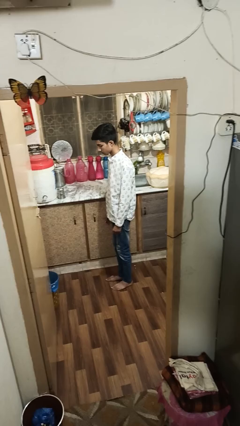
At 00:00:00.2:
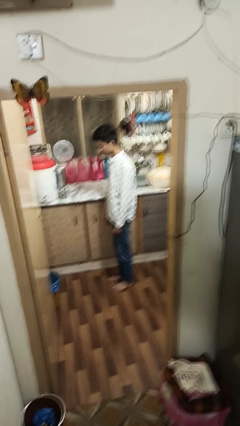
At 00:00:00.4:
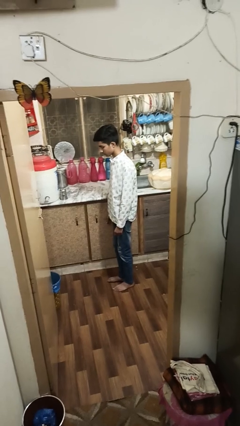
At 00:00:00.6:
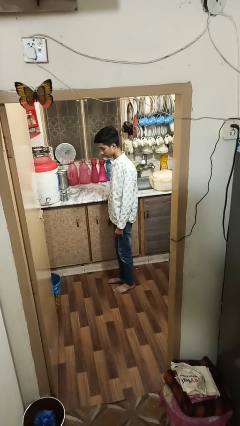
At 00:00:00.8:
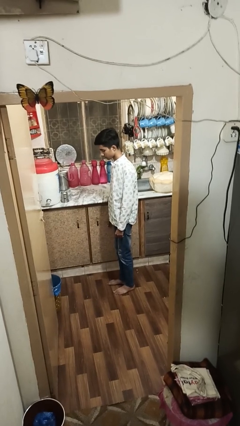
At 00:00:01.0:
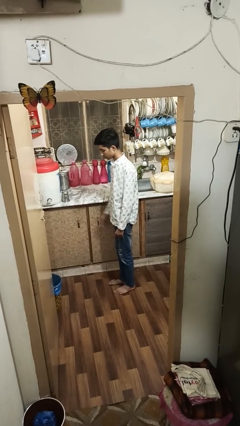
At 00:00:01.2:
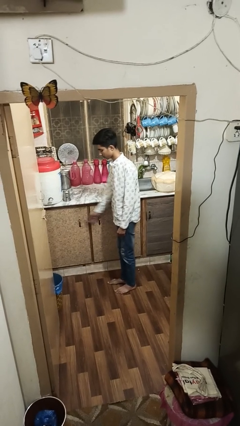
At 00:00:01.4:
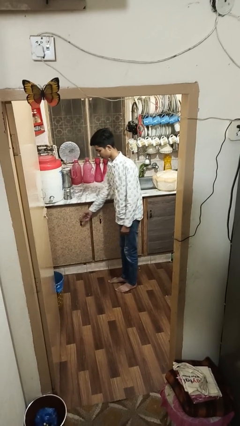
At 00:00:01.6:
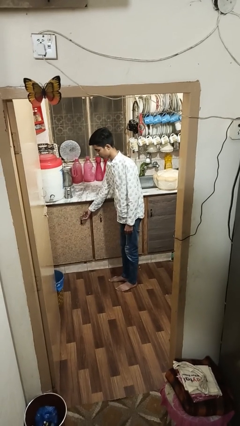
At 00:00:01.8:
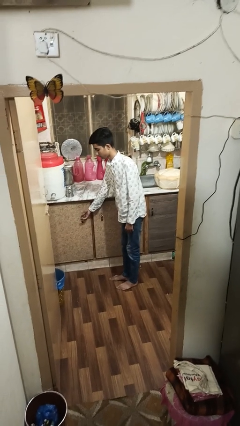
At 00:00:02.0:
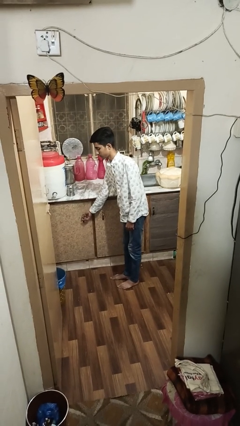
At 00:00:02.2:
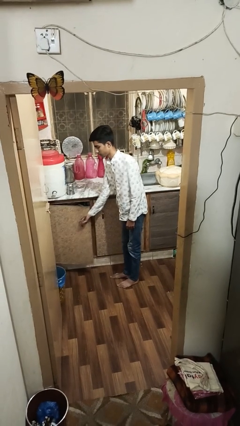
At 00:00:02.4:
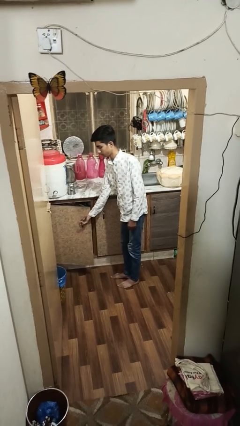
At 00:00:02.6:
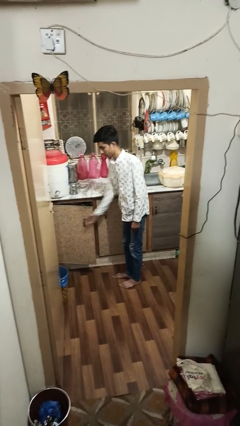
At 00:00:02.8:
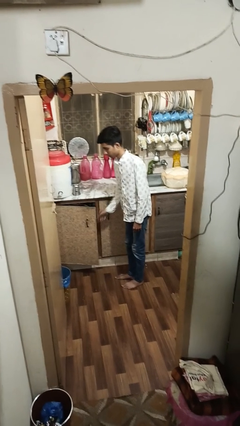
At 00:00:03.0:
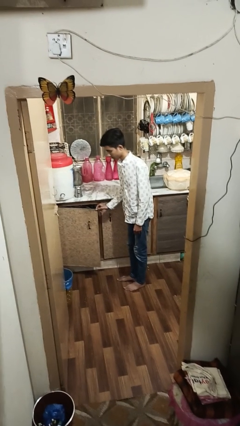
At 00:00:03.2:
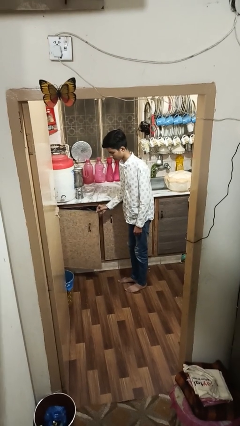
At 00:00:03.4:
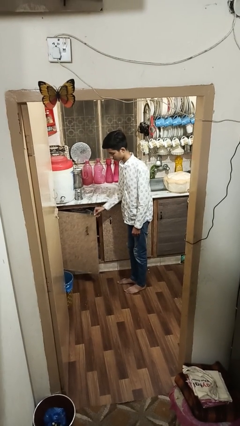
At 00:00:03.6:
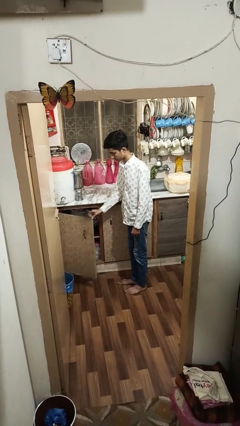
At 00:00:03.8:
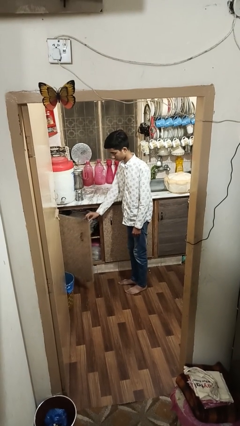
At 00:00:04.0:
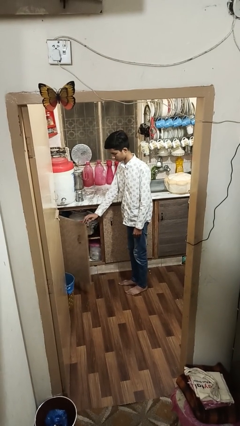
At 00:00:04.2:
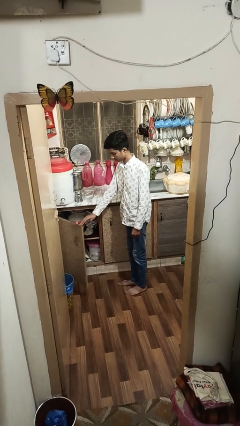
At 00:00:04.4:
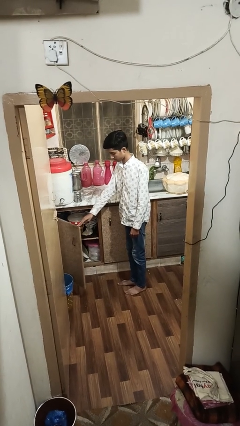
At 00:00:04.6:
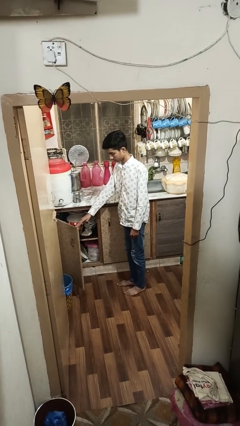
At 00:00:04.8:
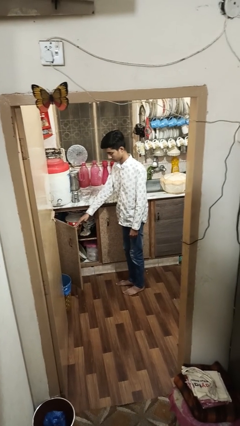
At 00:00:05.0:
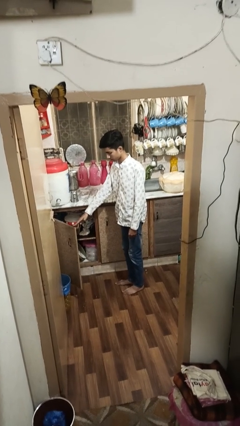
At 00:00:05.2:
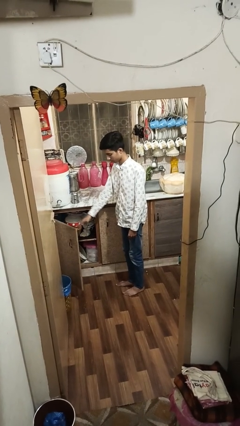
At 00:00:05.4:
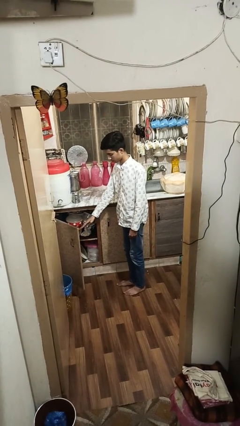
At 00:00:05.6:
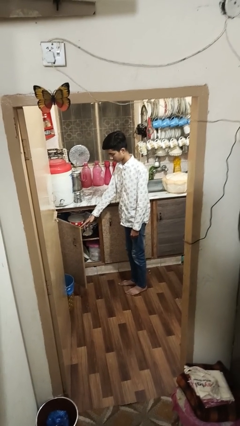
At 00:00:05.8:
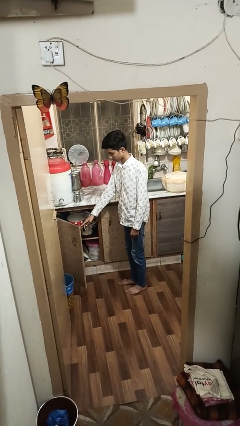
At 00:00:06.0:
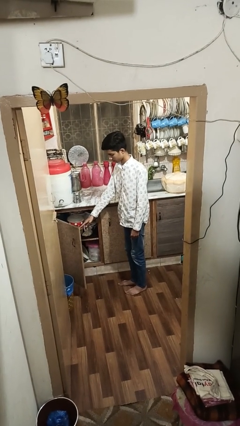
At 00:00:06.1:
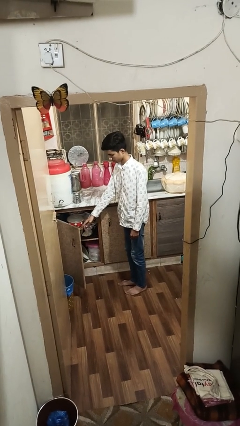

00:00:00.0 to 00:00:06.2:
person opens cabinet

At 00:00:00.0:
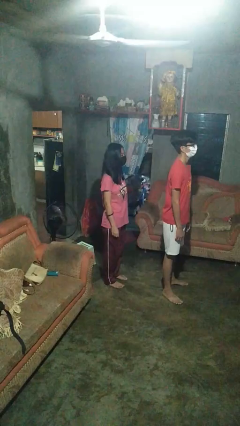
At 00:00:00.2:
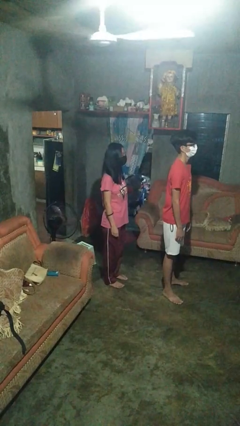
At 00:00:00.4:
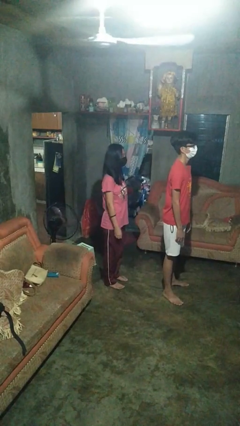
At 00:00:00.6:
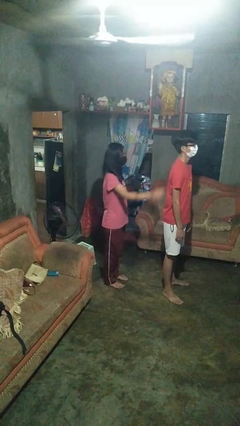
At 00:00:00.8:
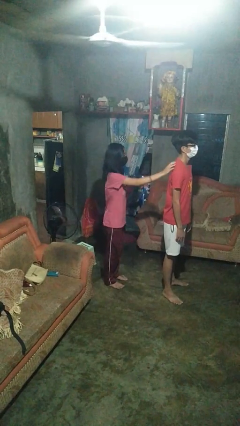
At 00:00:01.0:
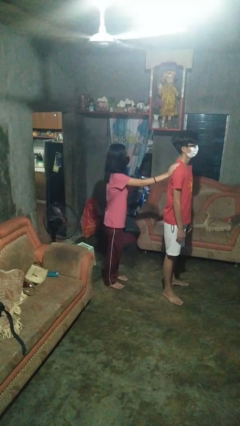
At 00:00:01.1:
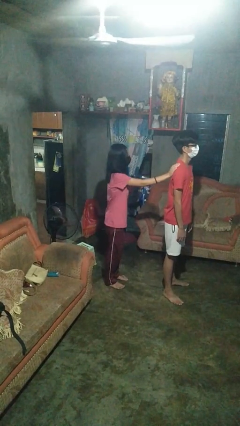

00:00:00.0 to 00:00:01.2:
person touches back of person

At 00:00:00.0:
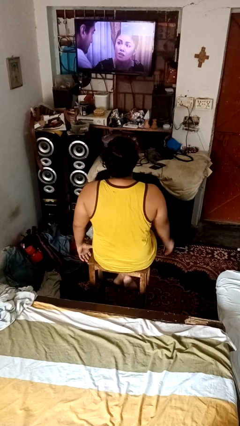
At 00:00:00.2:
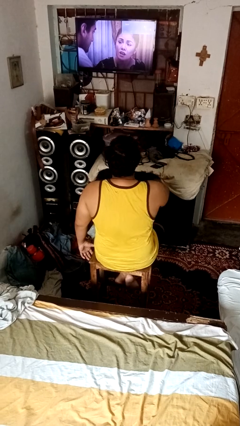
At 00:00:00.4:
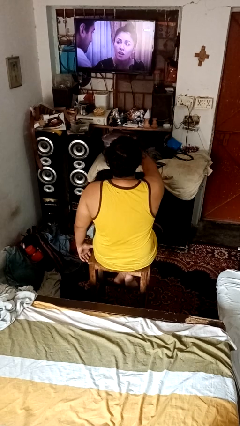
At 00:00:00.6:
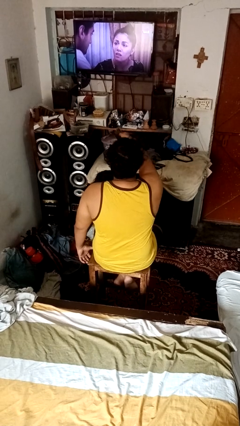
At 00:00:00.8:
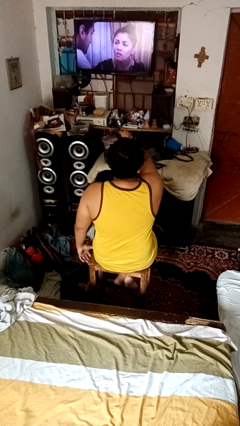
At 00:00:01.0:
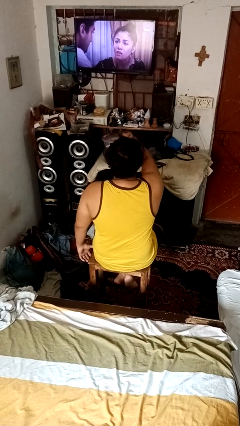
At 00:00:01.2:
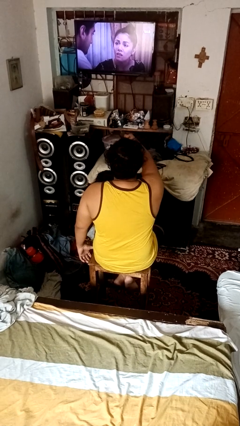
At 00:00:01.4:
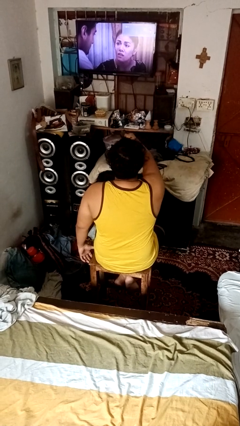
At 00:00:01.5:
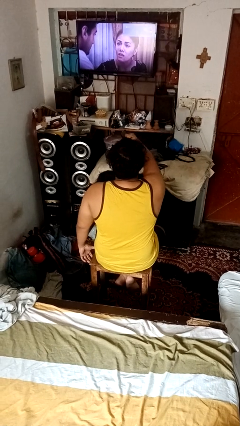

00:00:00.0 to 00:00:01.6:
person uses television remote

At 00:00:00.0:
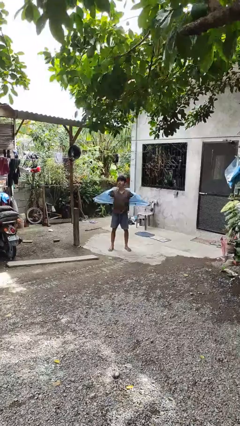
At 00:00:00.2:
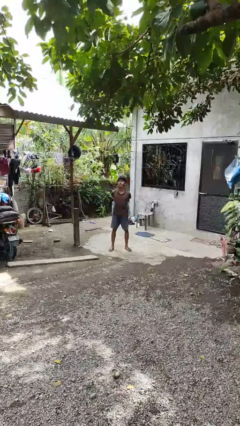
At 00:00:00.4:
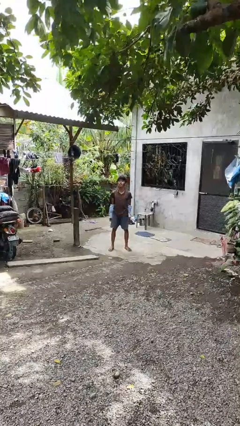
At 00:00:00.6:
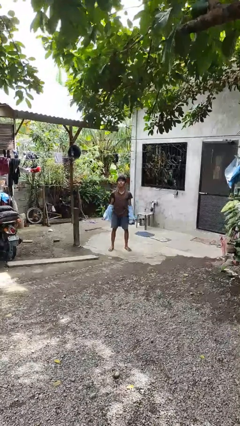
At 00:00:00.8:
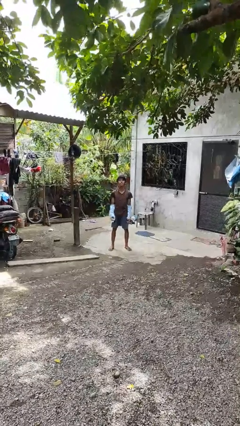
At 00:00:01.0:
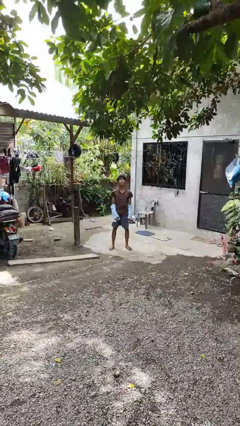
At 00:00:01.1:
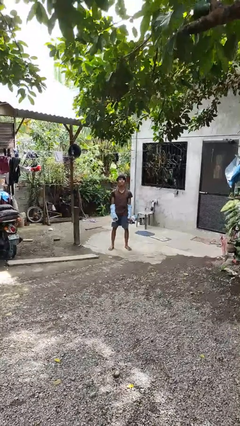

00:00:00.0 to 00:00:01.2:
person takes off jacket

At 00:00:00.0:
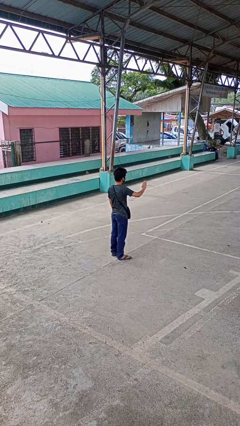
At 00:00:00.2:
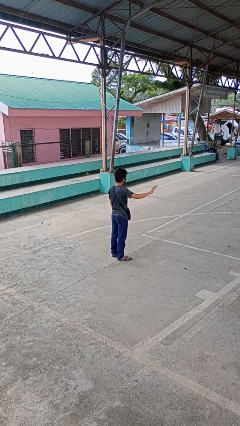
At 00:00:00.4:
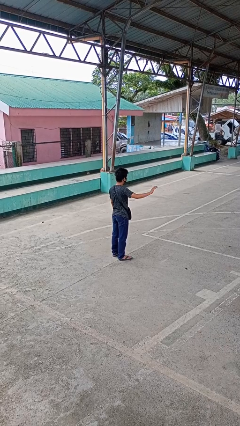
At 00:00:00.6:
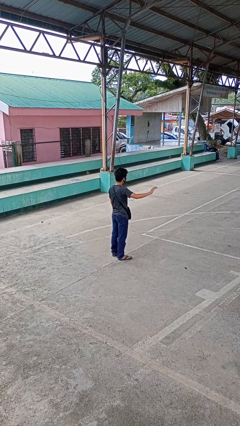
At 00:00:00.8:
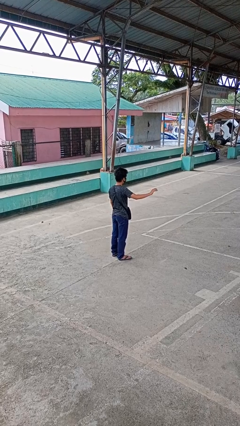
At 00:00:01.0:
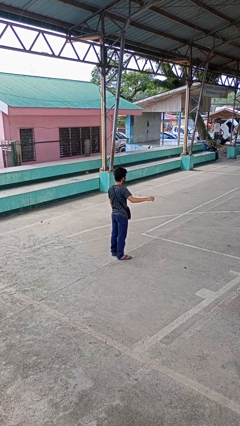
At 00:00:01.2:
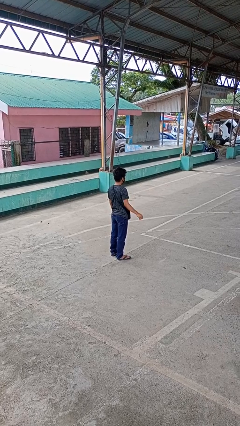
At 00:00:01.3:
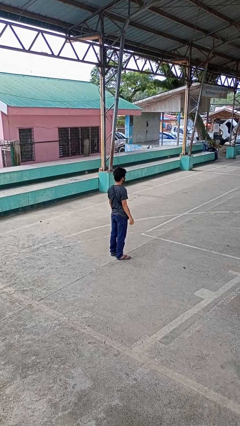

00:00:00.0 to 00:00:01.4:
person gestures swipe right

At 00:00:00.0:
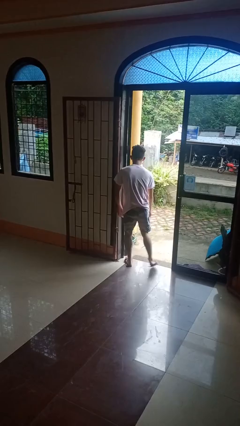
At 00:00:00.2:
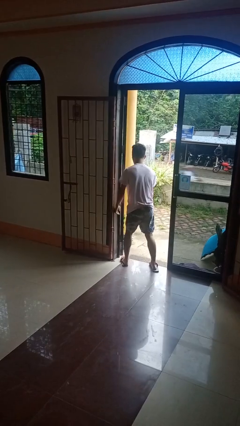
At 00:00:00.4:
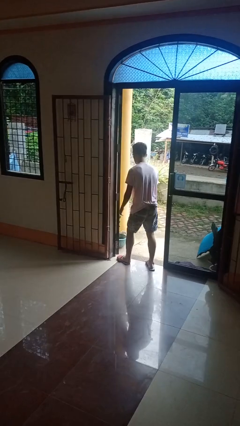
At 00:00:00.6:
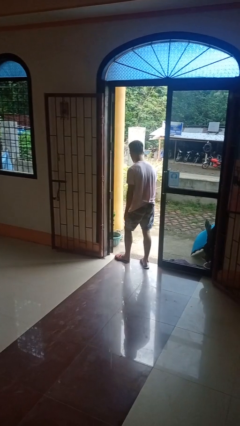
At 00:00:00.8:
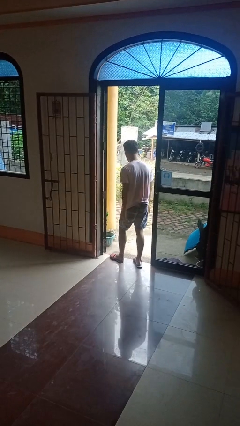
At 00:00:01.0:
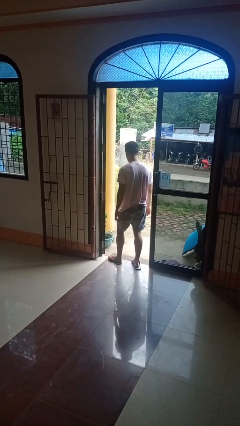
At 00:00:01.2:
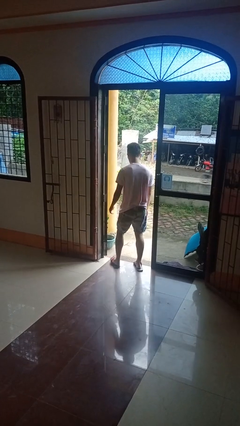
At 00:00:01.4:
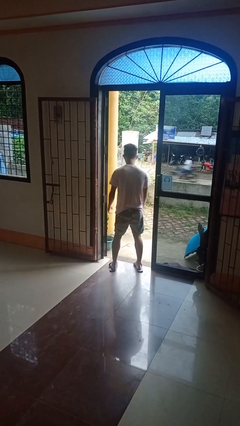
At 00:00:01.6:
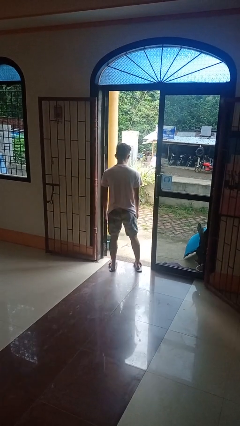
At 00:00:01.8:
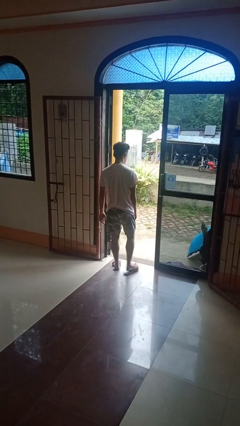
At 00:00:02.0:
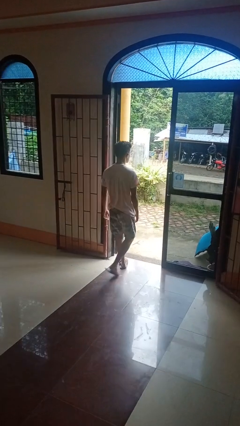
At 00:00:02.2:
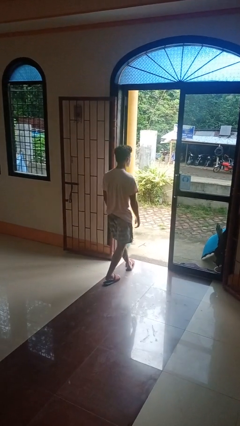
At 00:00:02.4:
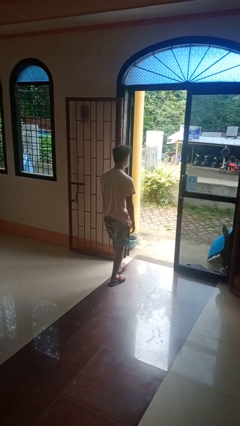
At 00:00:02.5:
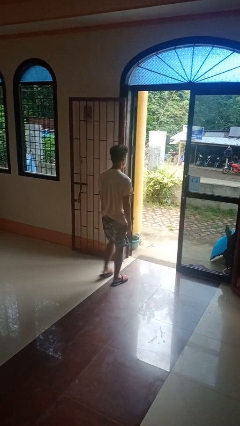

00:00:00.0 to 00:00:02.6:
person bumps into wall

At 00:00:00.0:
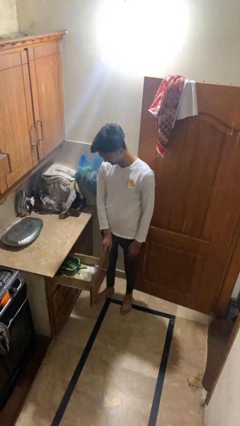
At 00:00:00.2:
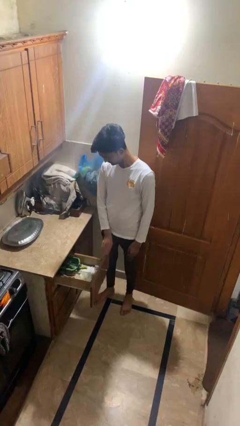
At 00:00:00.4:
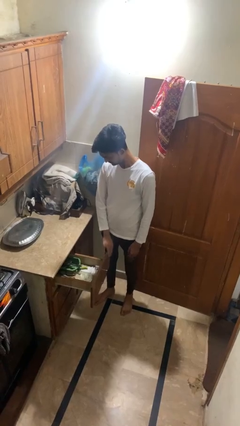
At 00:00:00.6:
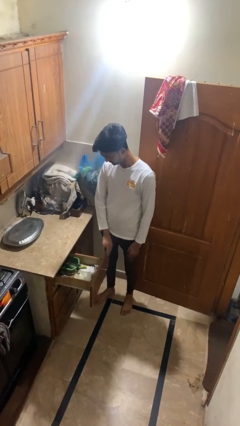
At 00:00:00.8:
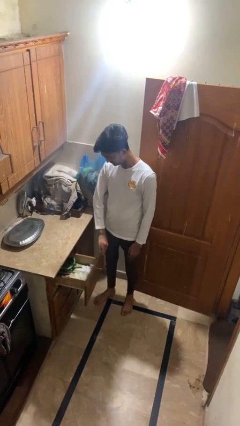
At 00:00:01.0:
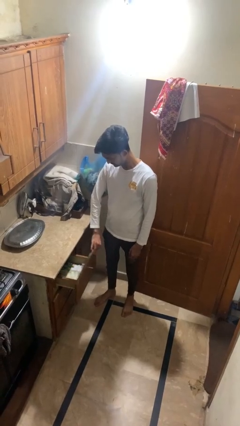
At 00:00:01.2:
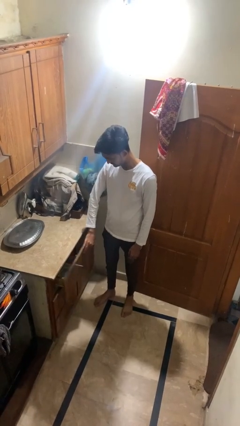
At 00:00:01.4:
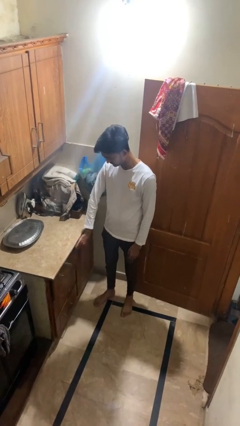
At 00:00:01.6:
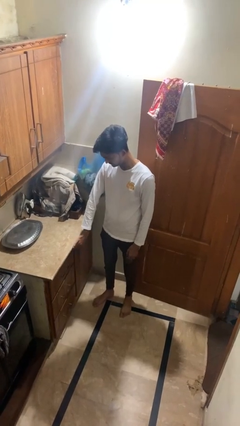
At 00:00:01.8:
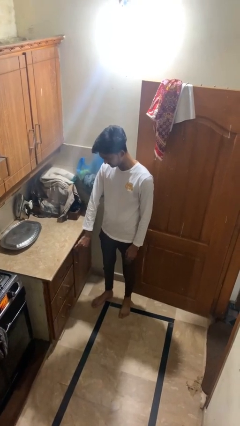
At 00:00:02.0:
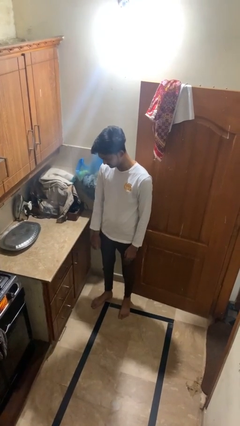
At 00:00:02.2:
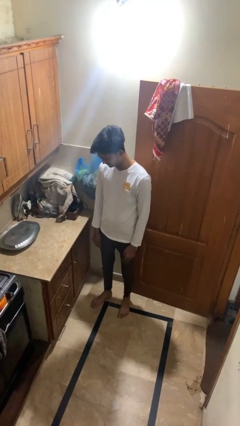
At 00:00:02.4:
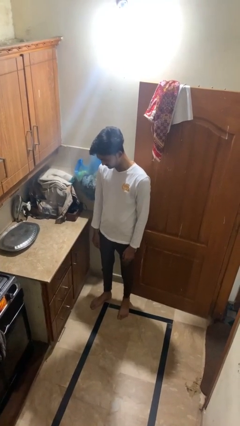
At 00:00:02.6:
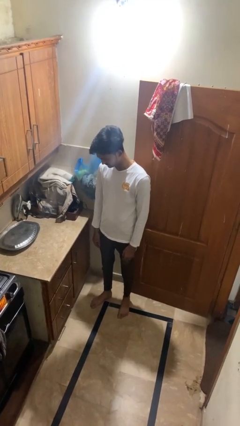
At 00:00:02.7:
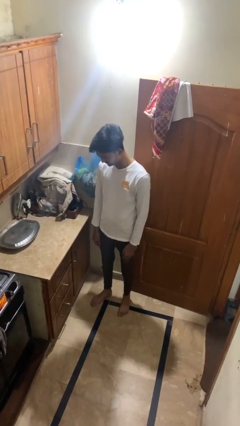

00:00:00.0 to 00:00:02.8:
person closes kitchen drawer

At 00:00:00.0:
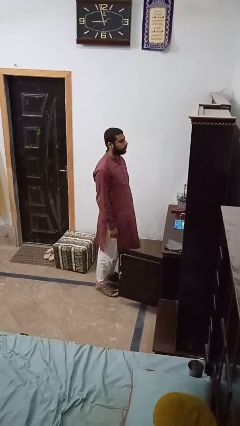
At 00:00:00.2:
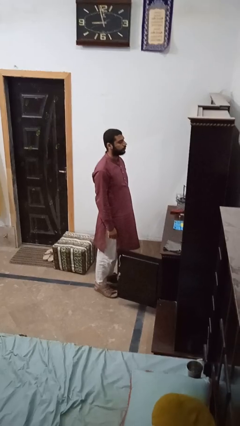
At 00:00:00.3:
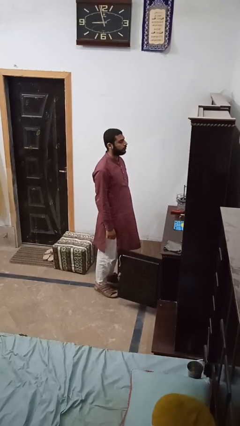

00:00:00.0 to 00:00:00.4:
person searches in cabinet
